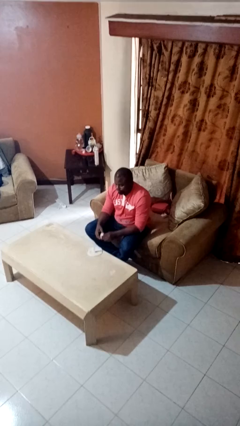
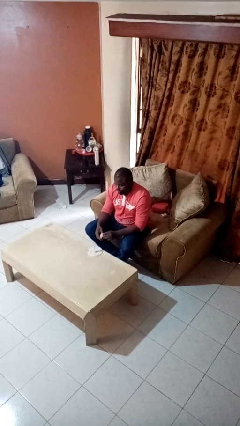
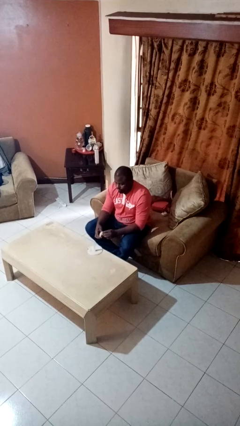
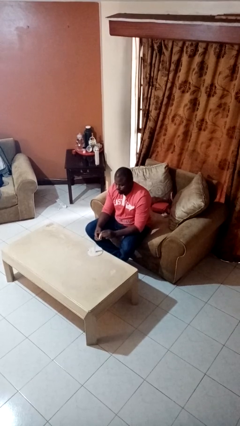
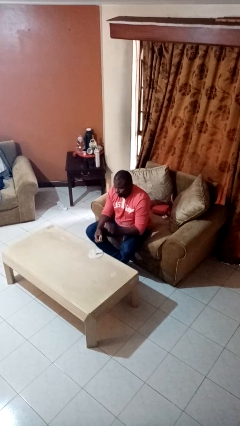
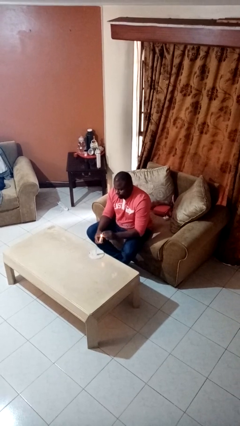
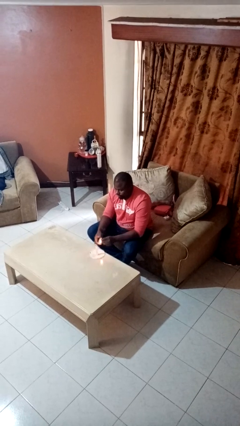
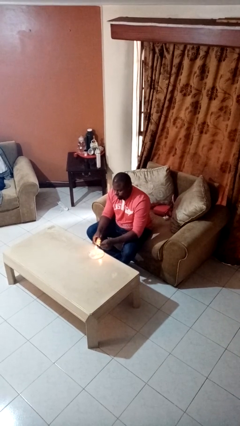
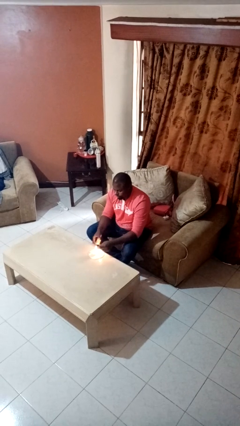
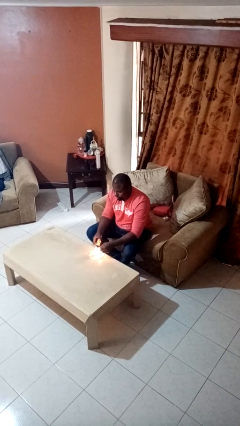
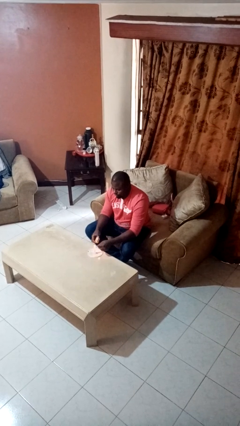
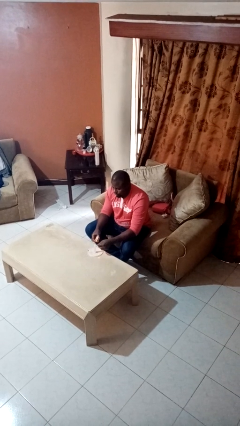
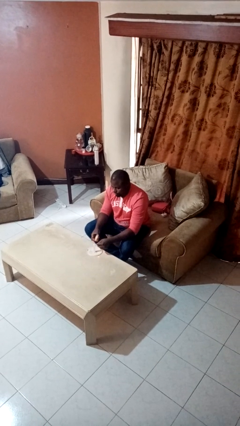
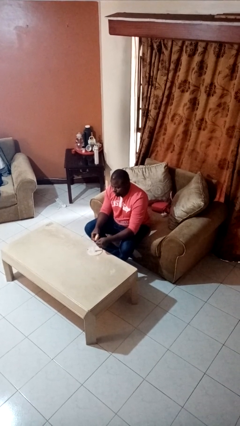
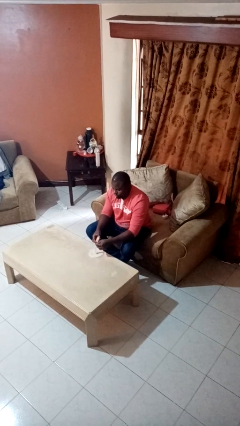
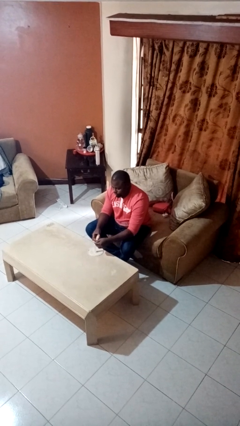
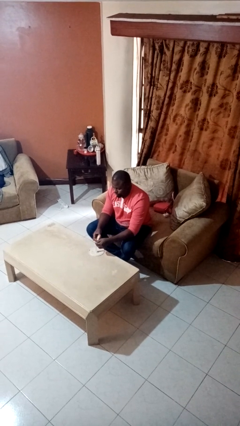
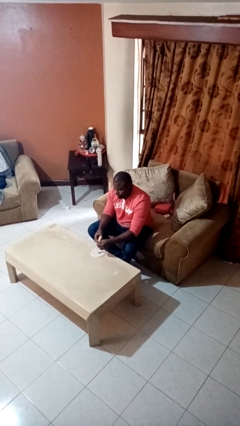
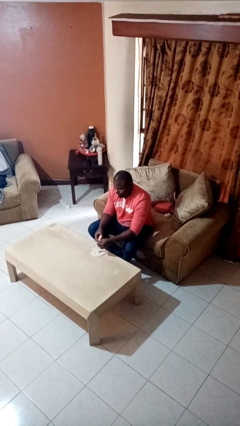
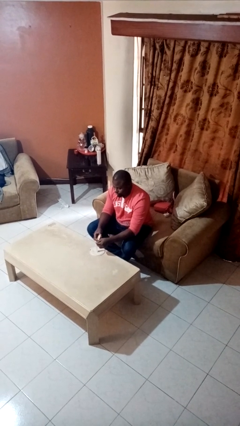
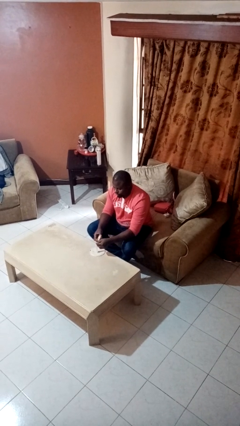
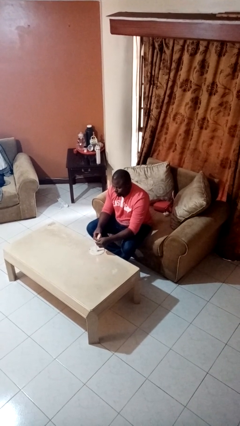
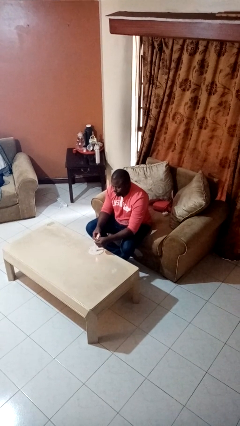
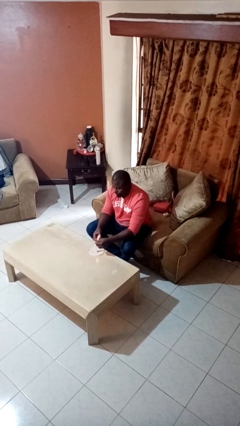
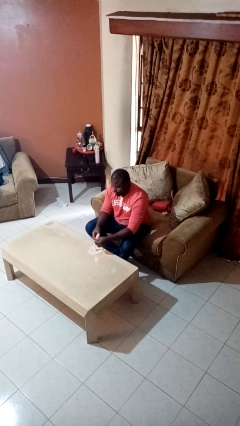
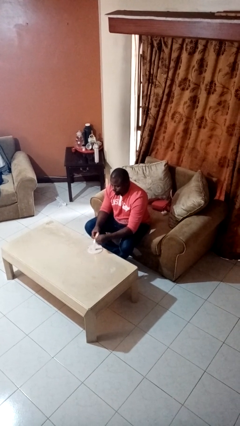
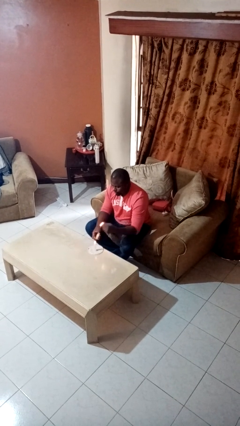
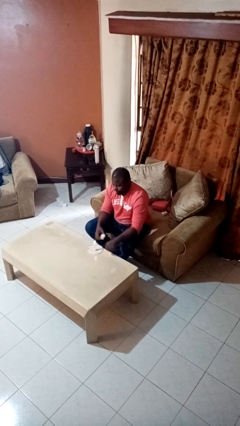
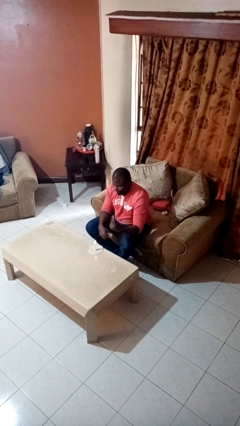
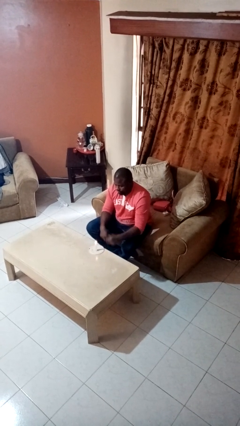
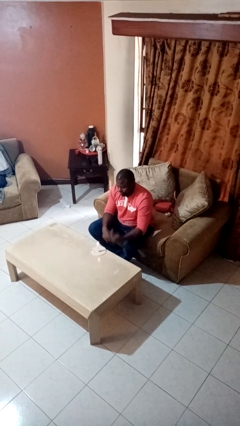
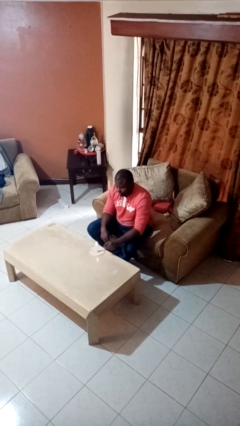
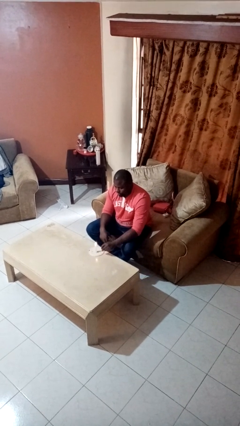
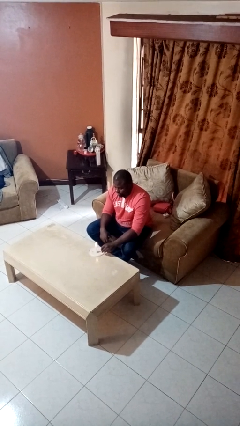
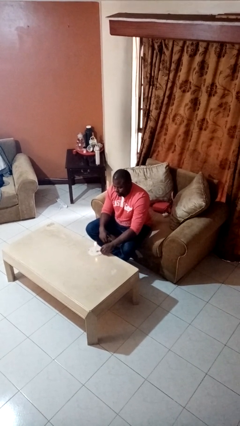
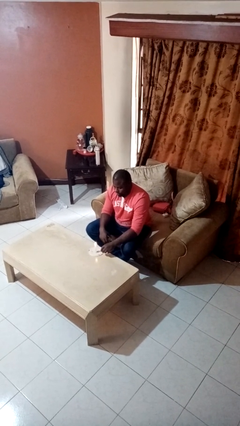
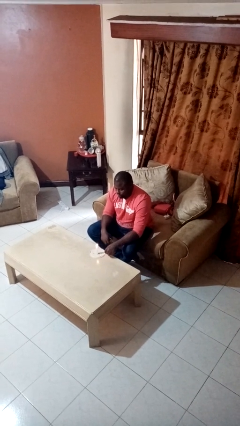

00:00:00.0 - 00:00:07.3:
person lights candle

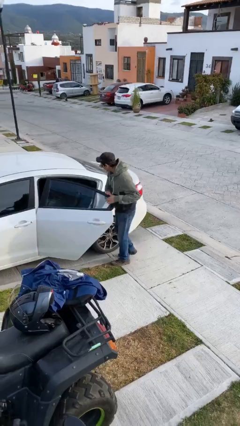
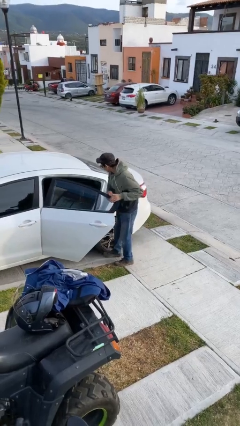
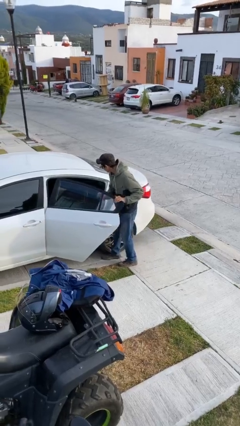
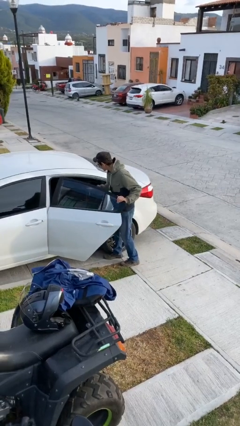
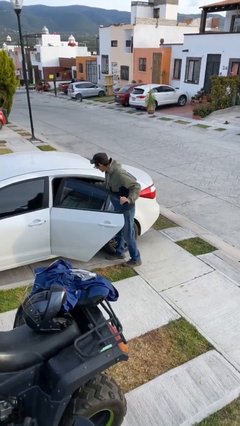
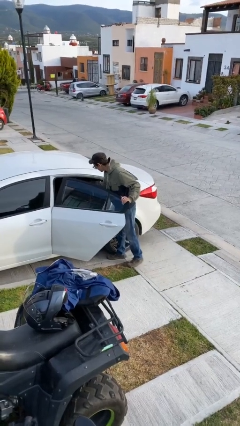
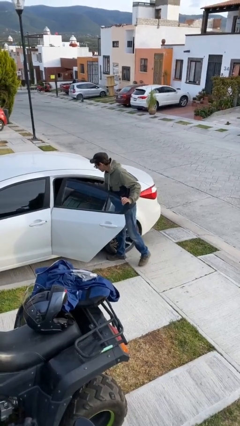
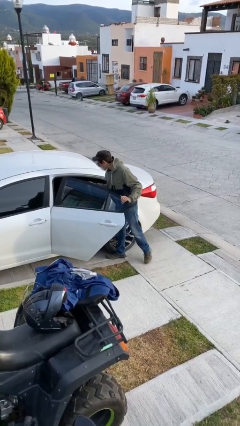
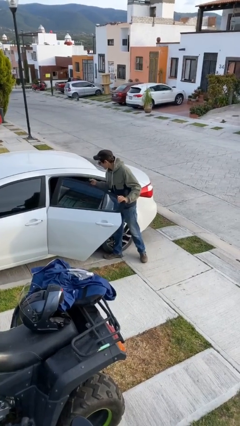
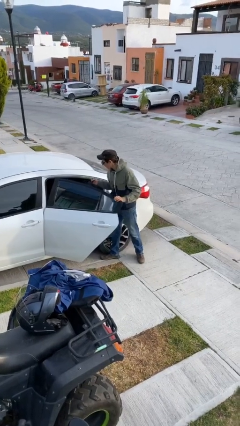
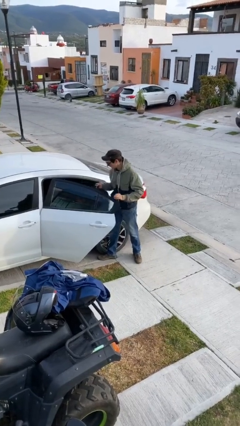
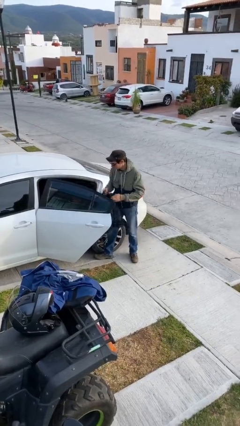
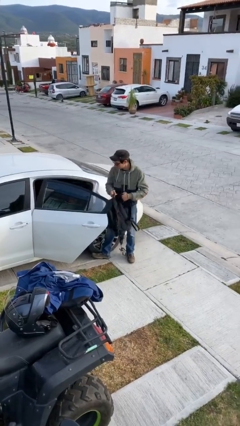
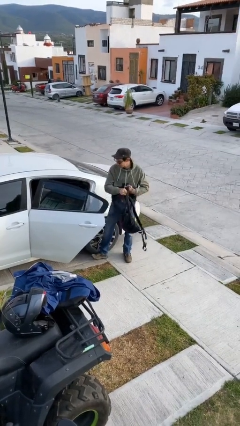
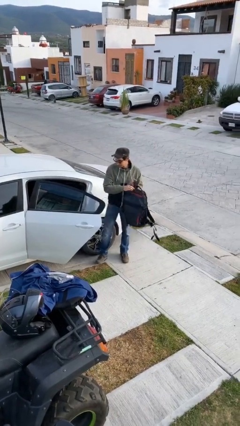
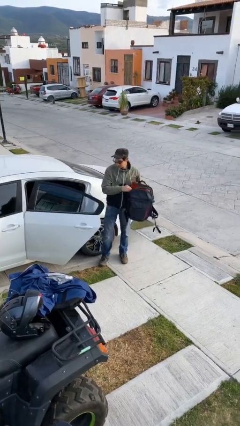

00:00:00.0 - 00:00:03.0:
person unloads car

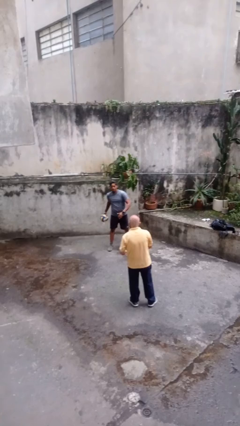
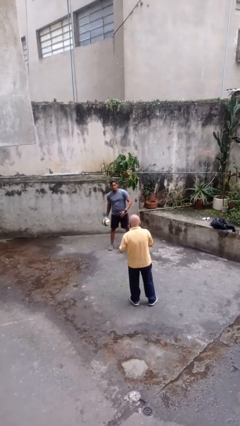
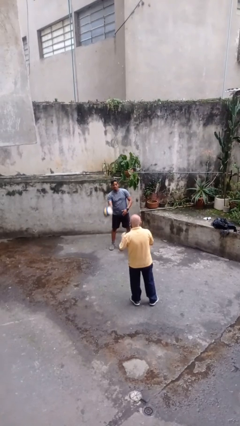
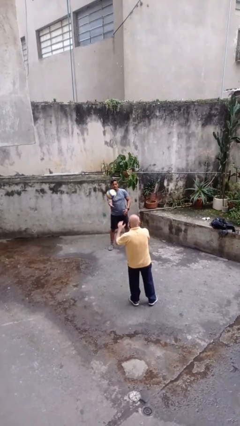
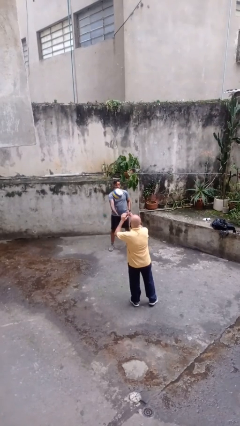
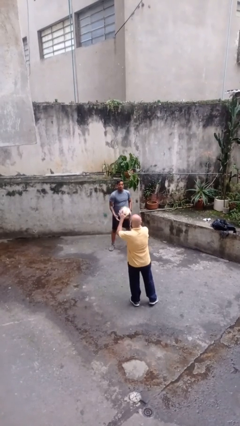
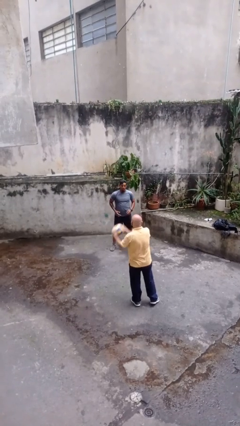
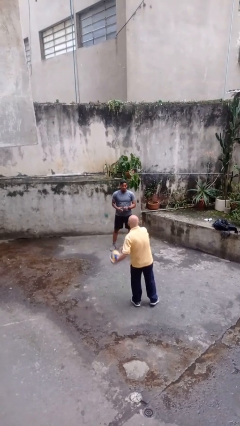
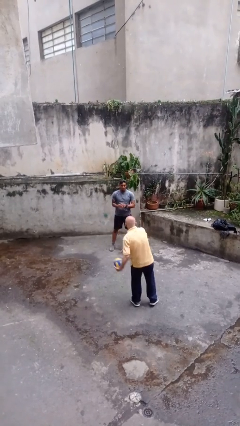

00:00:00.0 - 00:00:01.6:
person throws object to person

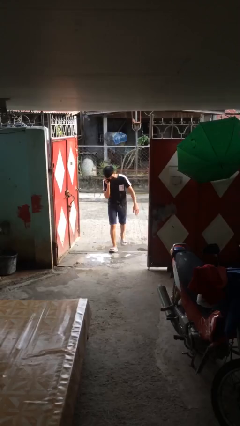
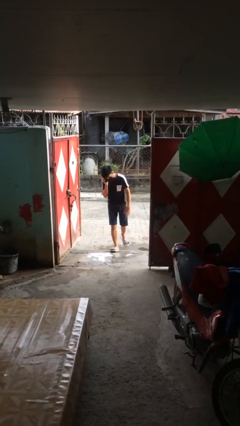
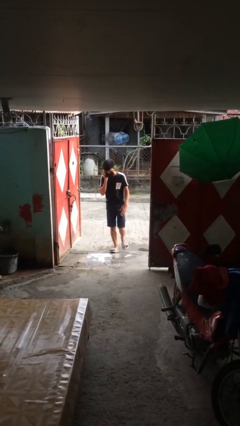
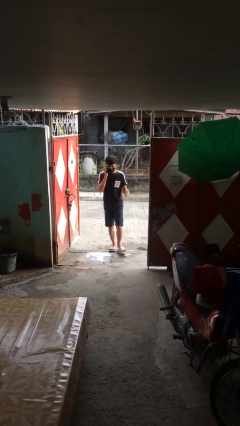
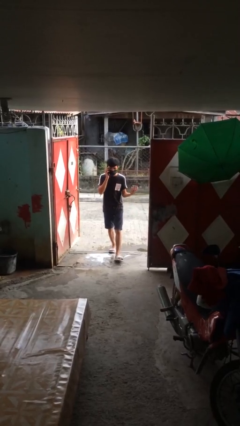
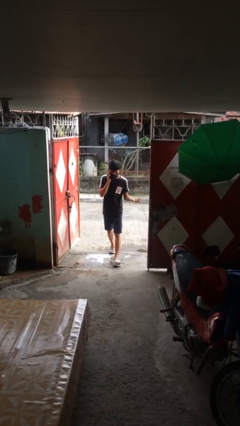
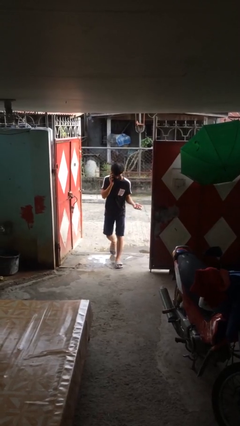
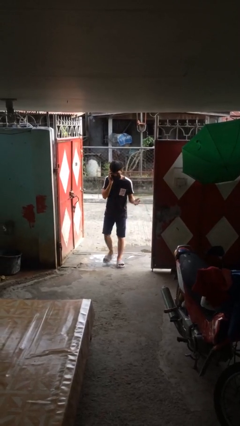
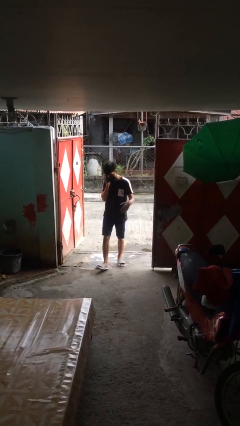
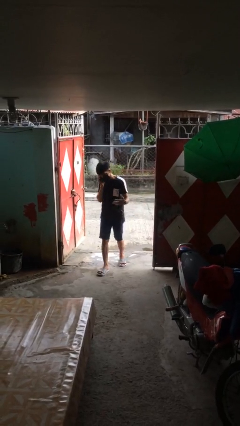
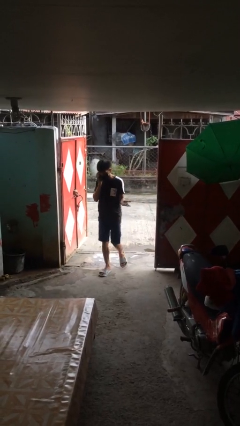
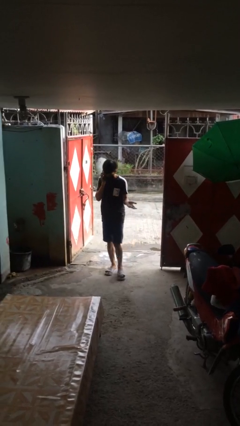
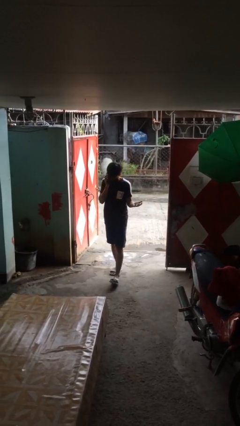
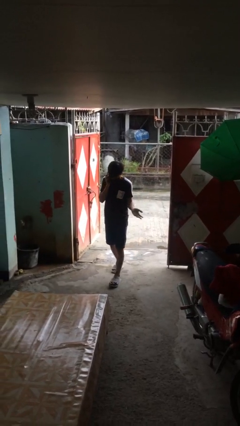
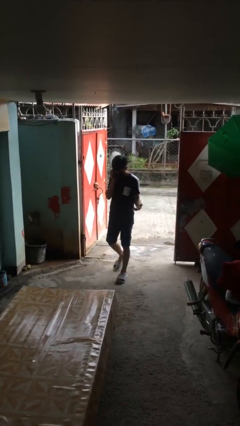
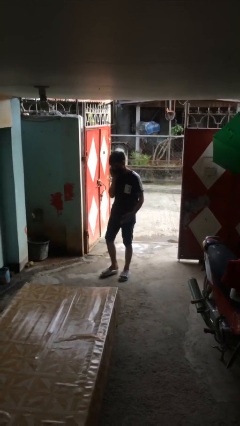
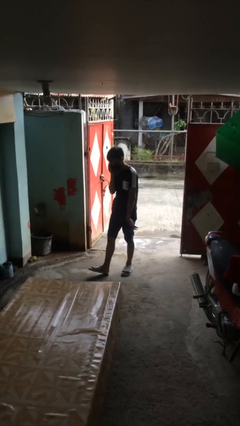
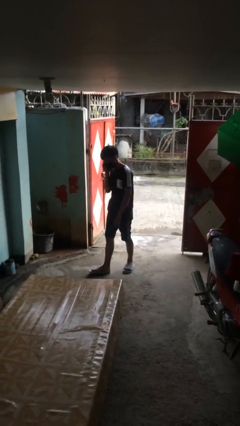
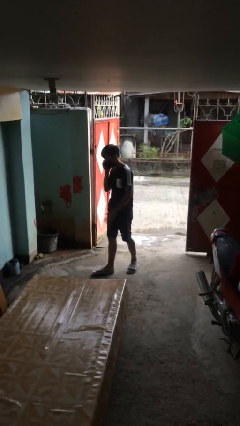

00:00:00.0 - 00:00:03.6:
person enters scene through structure

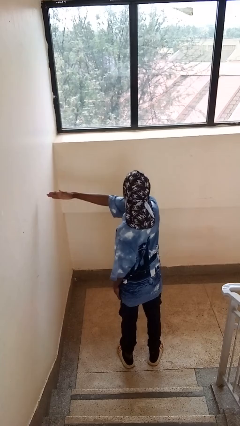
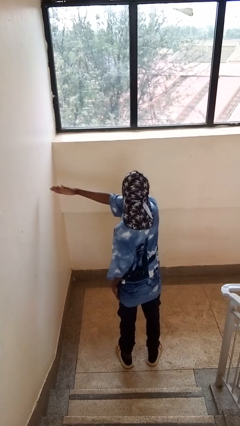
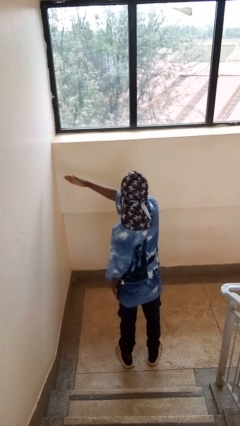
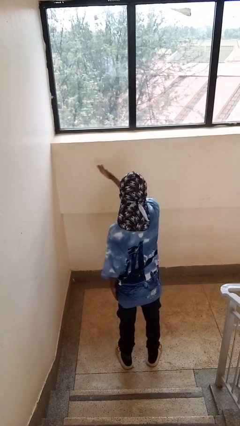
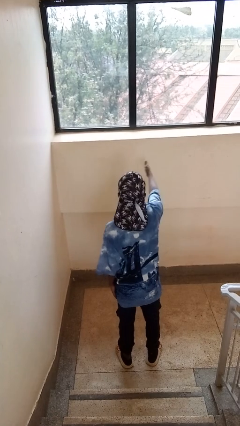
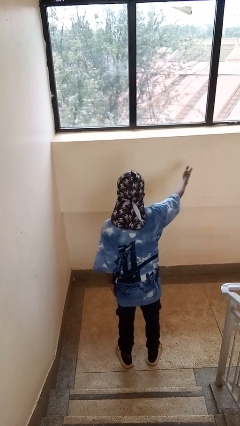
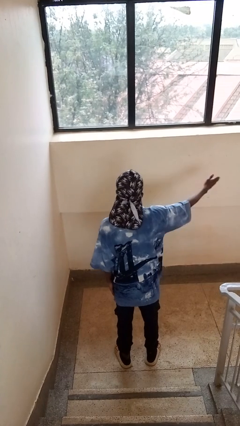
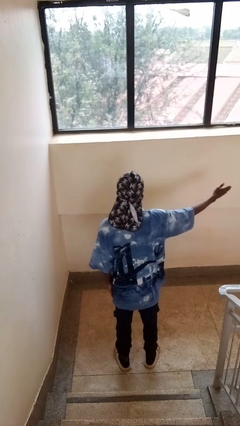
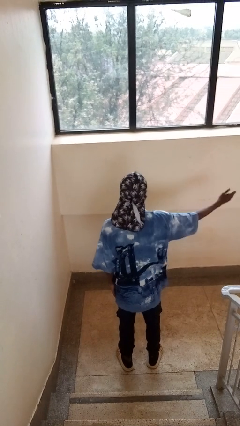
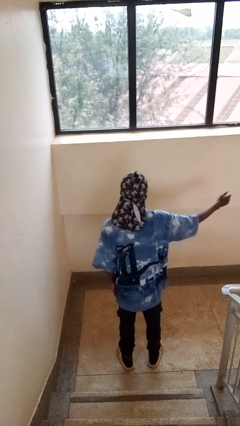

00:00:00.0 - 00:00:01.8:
person gestures swipe right

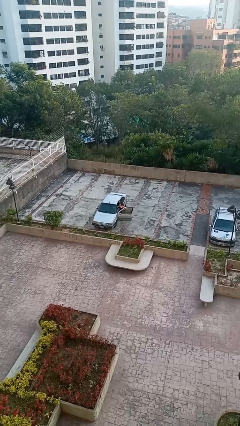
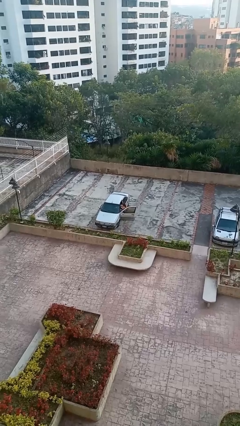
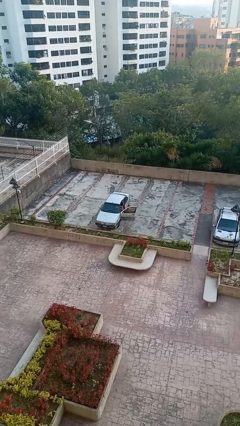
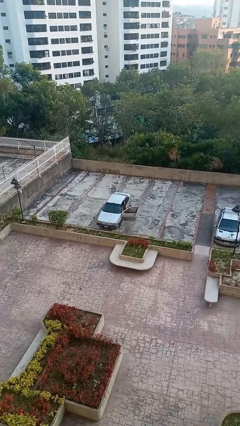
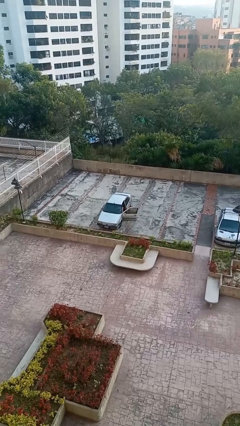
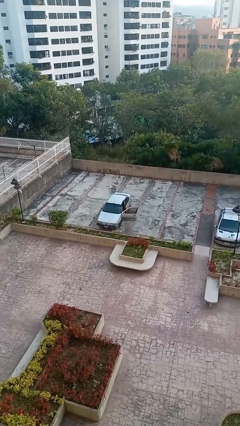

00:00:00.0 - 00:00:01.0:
person enters car
